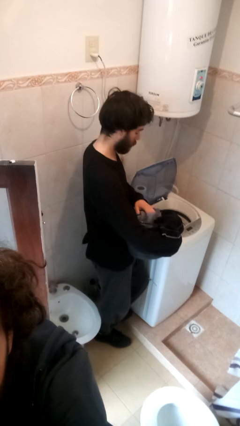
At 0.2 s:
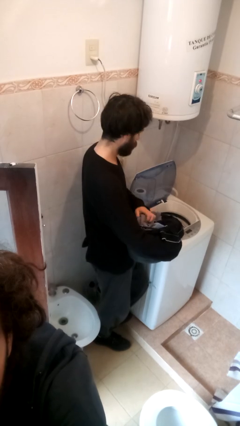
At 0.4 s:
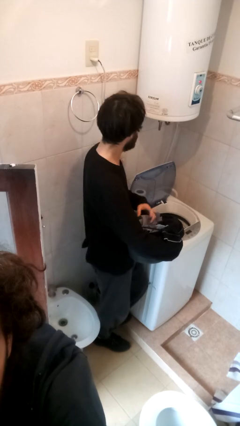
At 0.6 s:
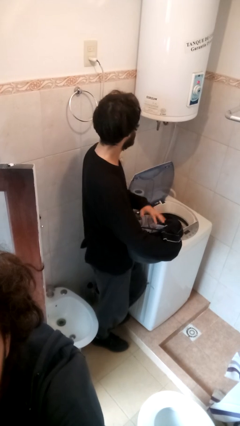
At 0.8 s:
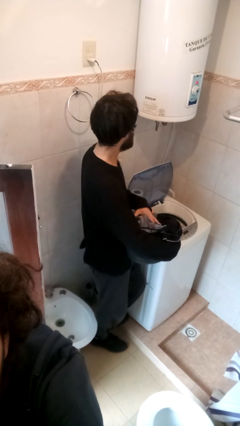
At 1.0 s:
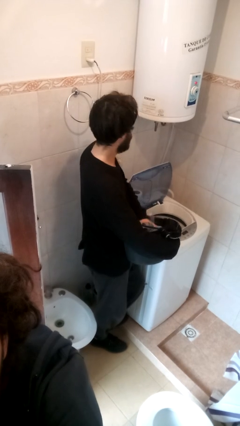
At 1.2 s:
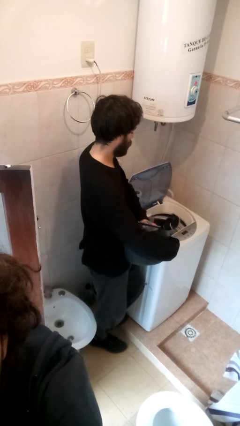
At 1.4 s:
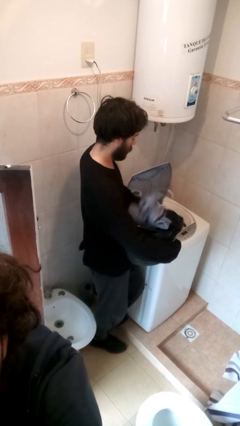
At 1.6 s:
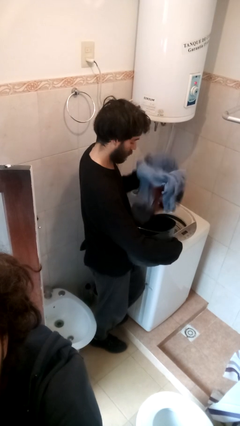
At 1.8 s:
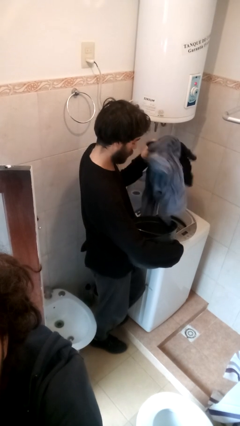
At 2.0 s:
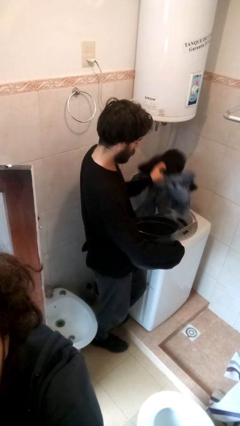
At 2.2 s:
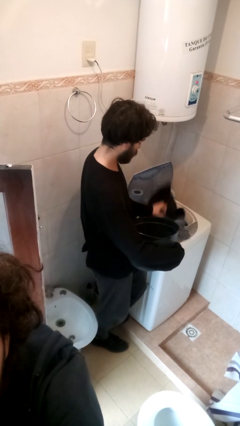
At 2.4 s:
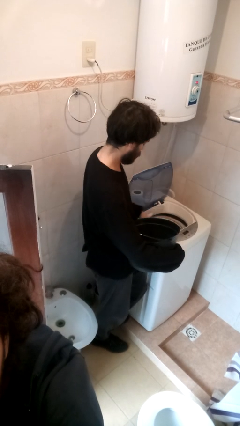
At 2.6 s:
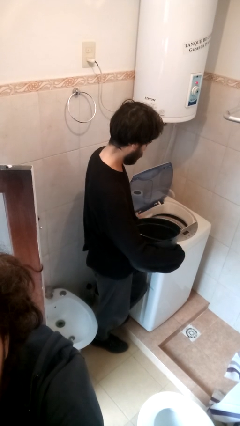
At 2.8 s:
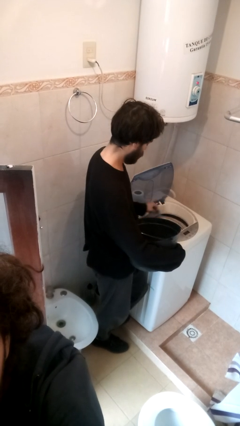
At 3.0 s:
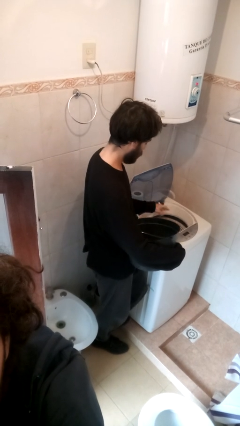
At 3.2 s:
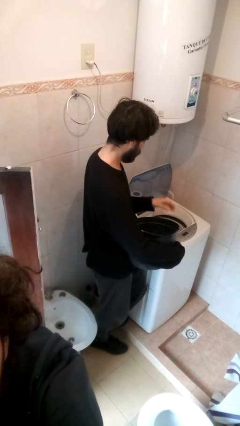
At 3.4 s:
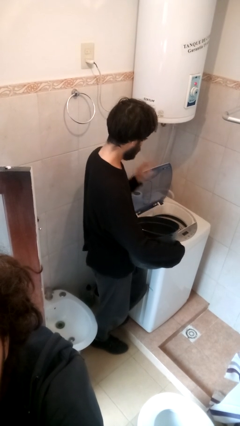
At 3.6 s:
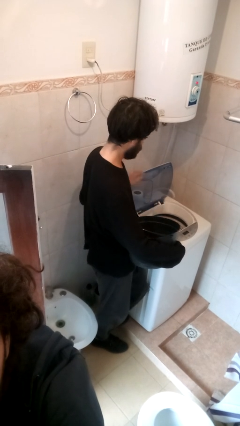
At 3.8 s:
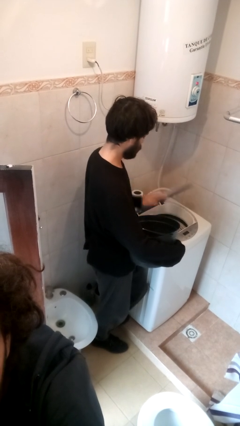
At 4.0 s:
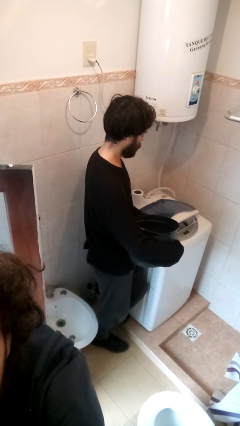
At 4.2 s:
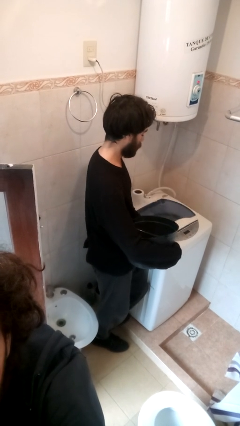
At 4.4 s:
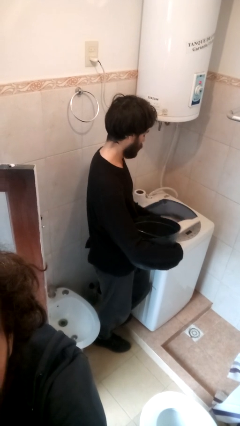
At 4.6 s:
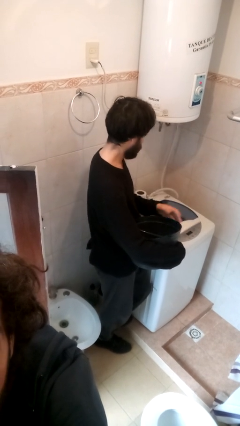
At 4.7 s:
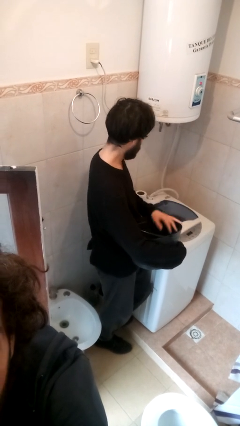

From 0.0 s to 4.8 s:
person loads clotheswasher

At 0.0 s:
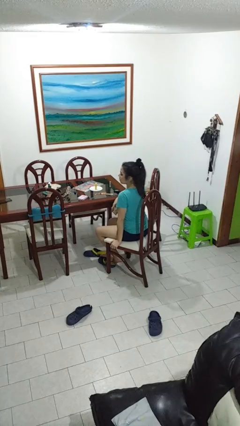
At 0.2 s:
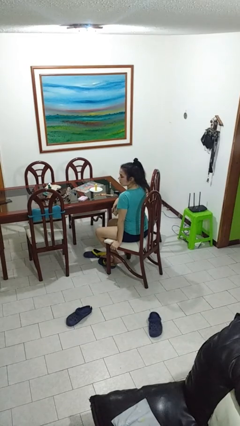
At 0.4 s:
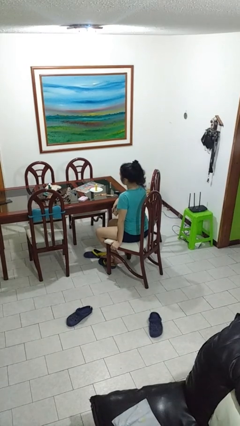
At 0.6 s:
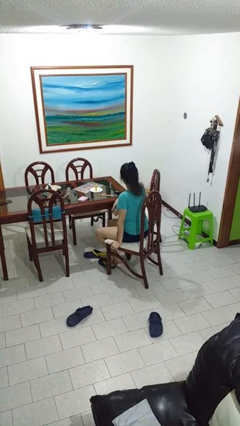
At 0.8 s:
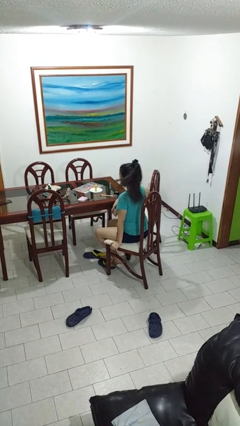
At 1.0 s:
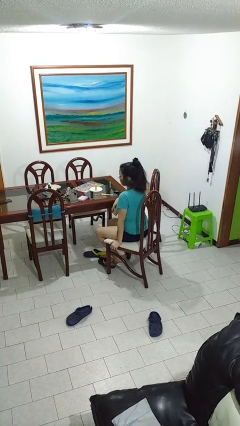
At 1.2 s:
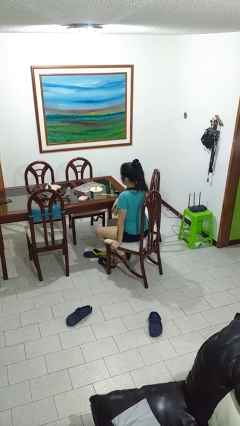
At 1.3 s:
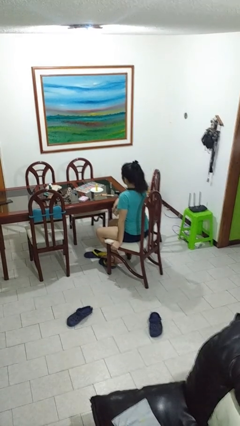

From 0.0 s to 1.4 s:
person shakes head

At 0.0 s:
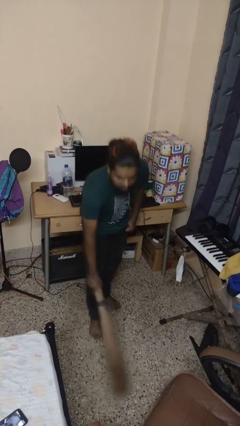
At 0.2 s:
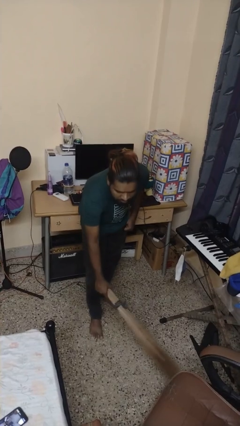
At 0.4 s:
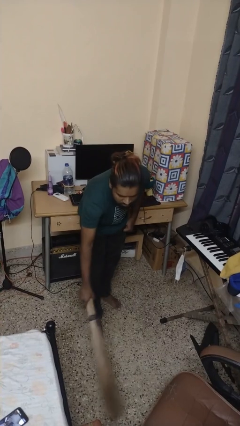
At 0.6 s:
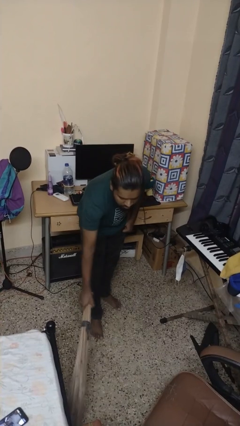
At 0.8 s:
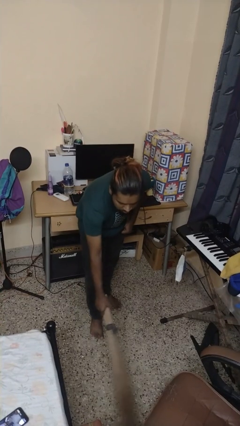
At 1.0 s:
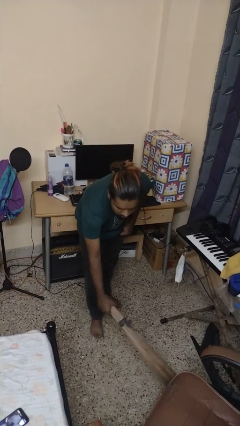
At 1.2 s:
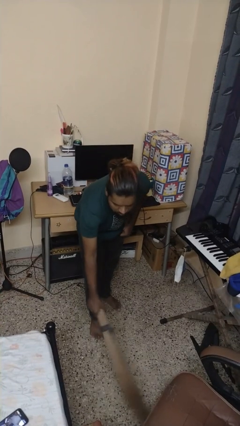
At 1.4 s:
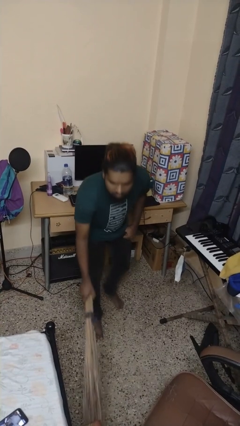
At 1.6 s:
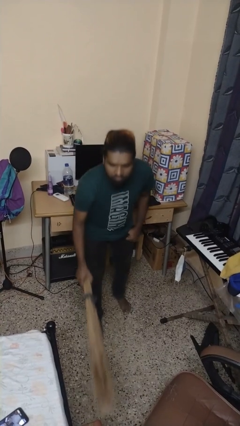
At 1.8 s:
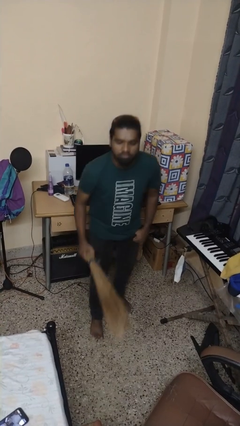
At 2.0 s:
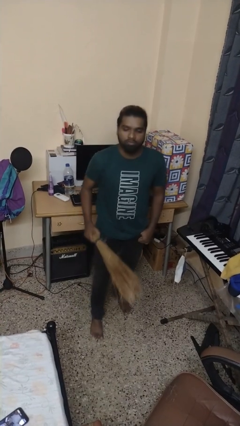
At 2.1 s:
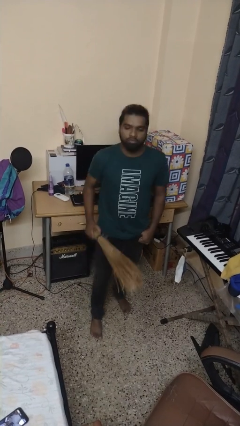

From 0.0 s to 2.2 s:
person sweeps floor

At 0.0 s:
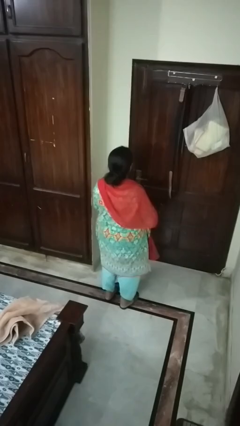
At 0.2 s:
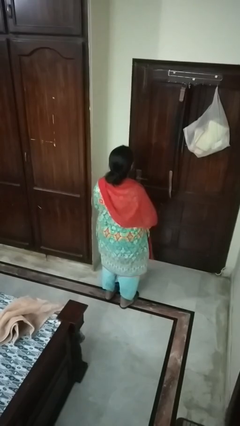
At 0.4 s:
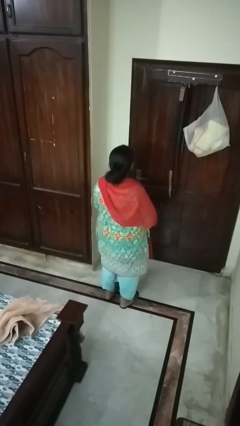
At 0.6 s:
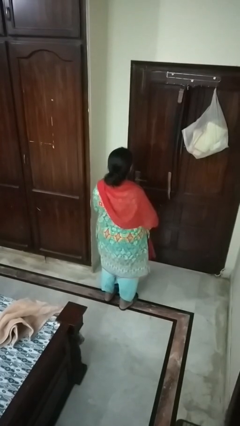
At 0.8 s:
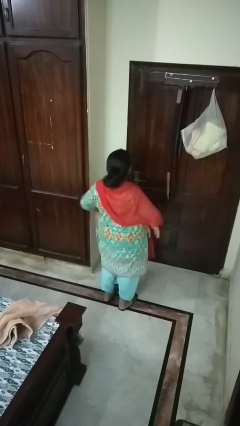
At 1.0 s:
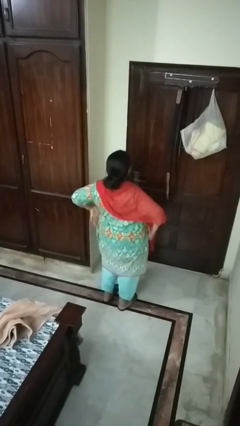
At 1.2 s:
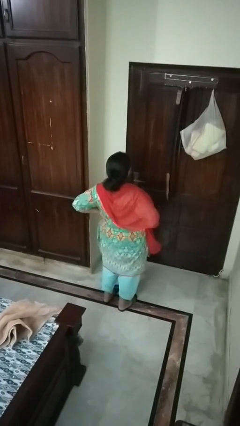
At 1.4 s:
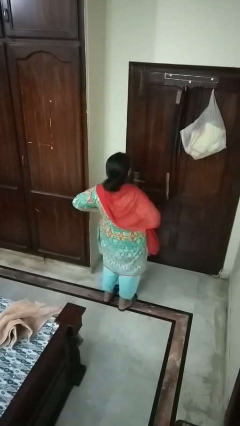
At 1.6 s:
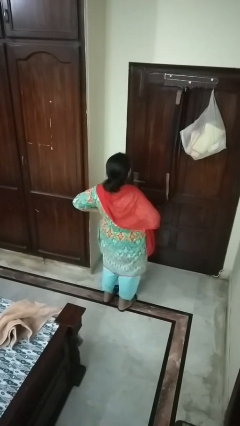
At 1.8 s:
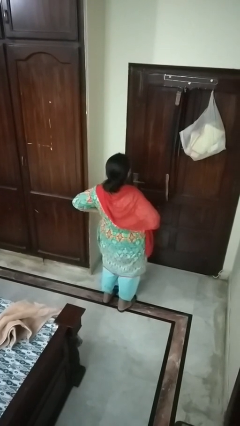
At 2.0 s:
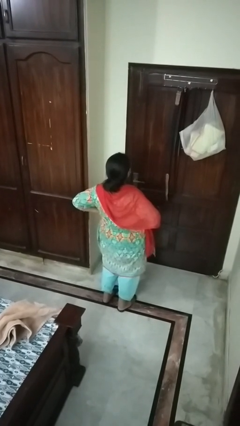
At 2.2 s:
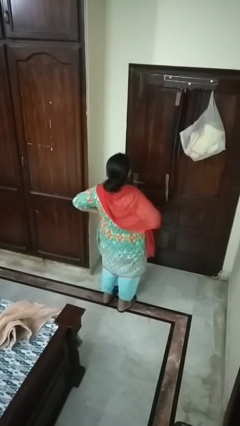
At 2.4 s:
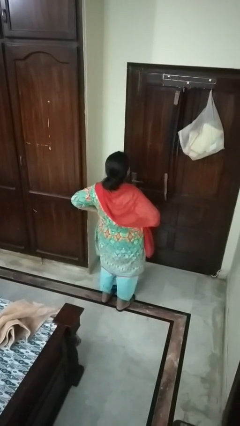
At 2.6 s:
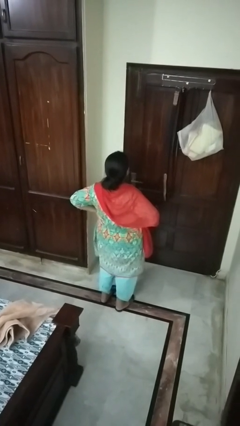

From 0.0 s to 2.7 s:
person stretches back

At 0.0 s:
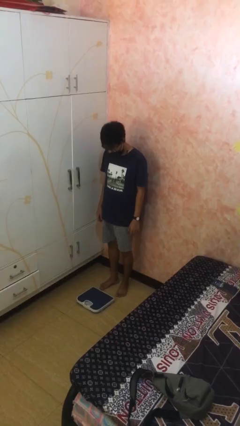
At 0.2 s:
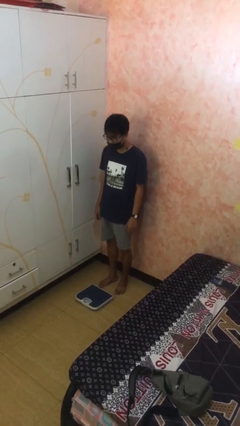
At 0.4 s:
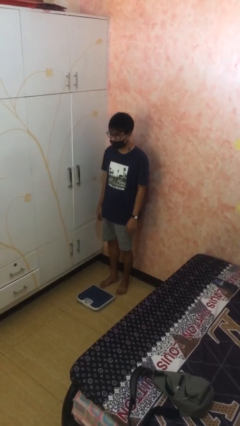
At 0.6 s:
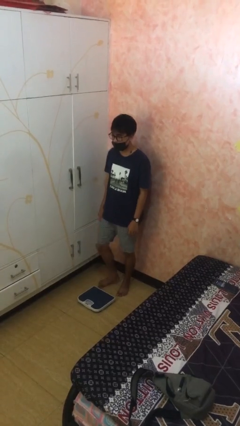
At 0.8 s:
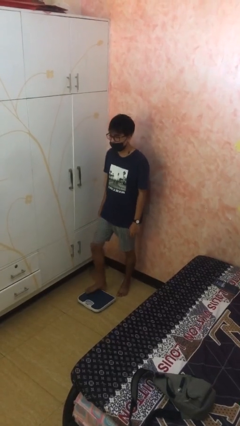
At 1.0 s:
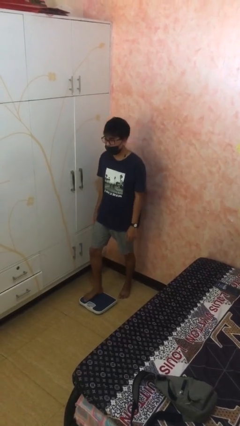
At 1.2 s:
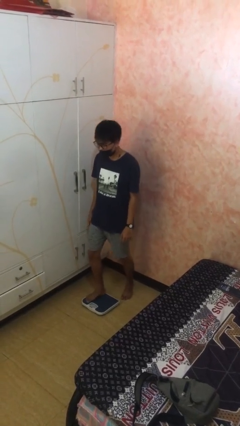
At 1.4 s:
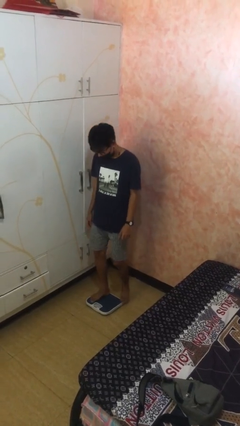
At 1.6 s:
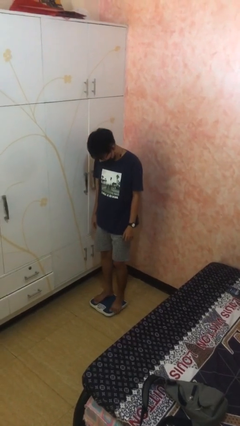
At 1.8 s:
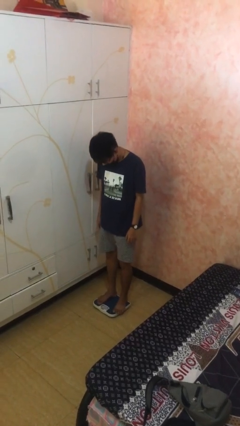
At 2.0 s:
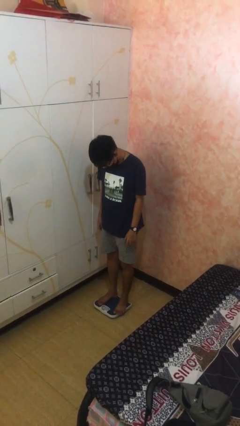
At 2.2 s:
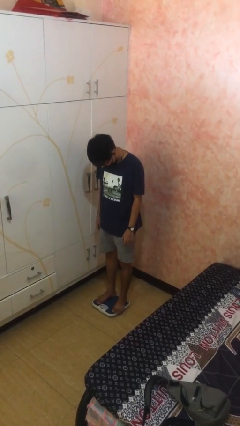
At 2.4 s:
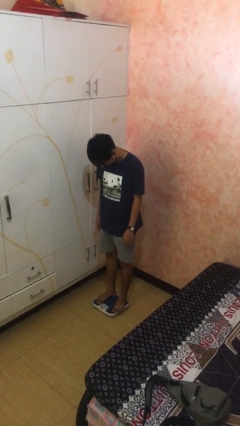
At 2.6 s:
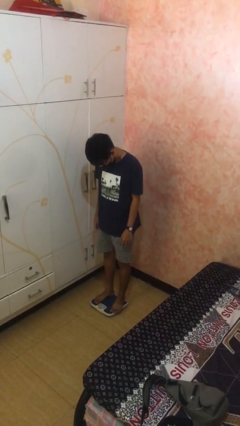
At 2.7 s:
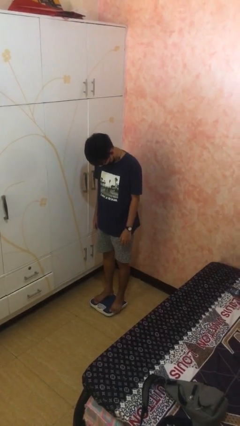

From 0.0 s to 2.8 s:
person uses bodyweight scale

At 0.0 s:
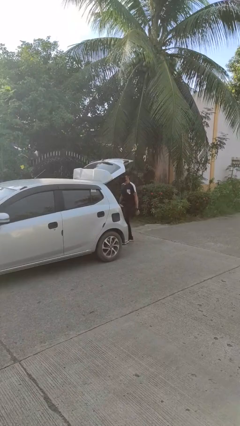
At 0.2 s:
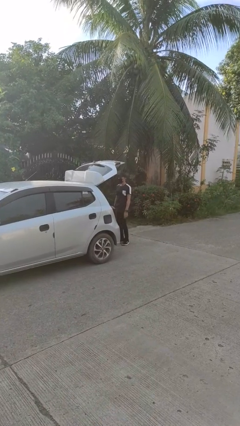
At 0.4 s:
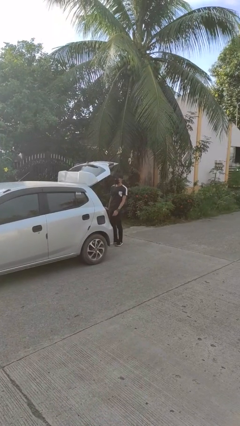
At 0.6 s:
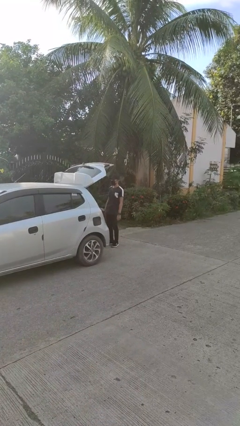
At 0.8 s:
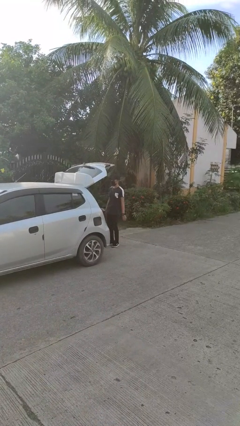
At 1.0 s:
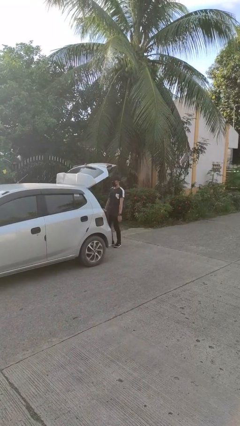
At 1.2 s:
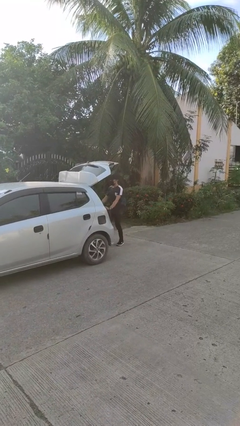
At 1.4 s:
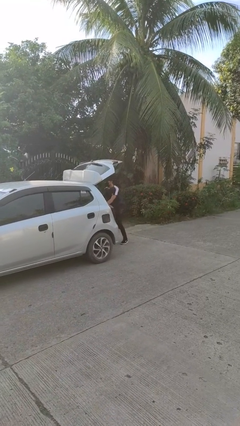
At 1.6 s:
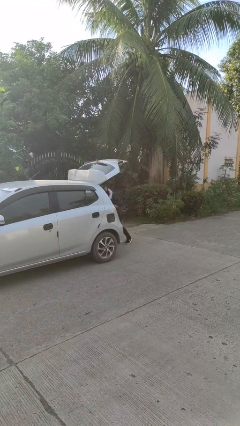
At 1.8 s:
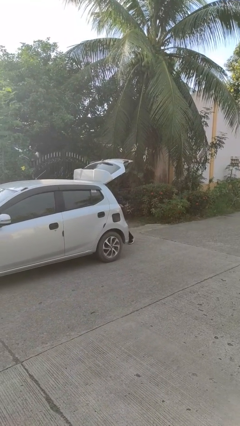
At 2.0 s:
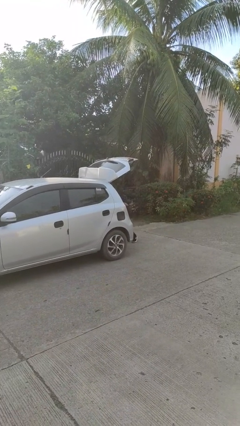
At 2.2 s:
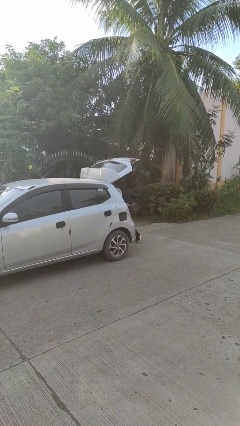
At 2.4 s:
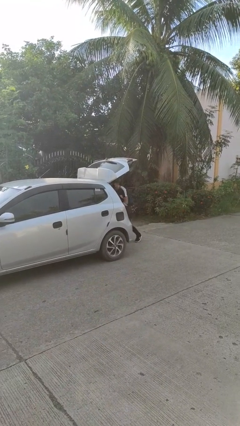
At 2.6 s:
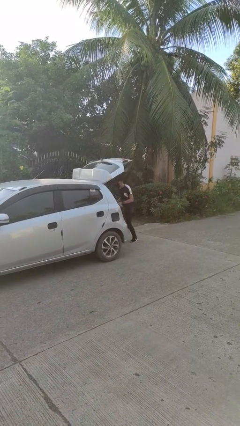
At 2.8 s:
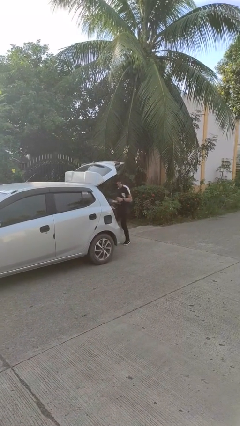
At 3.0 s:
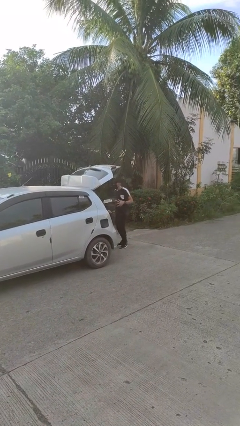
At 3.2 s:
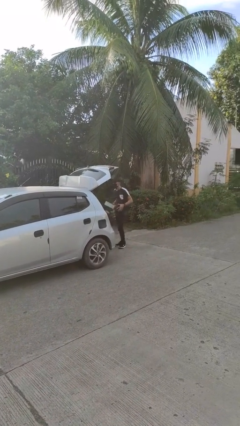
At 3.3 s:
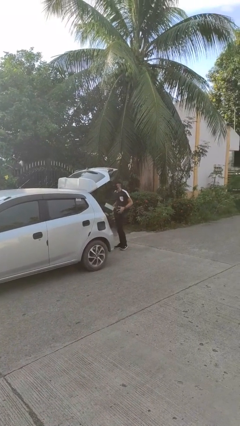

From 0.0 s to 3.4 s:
person unloads car

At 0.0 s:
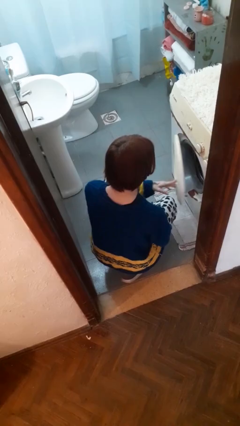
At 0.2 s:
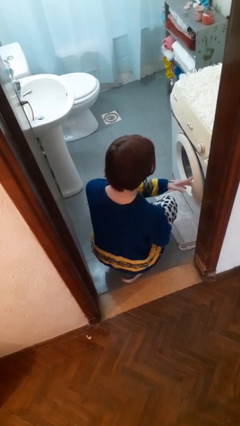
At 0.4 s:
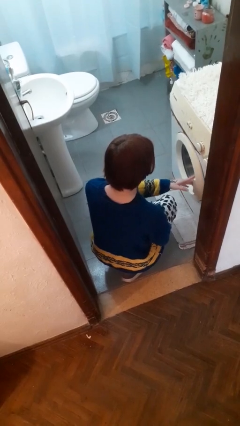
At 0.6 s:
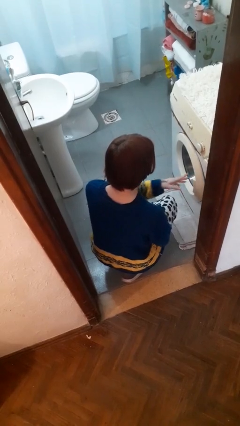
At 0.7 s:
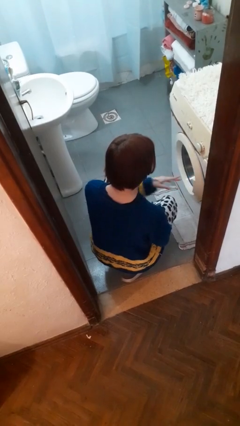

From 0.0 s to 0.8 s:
person closes clothes washer
